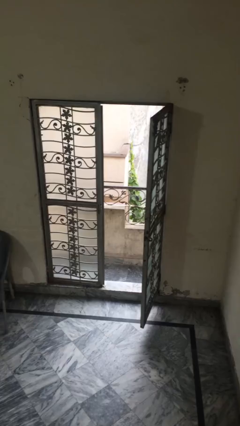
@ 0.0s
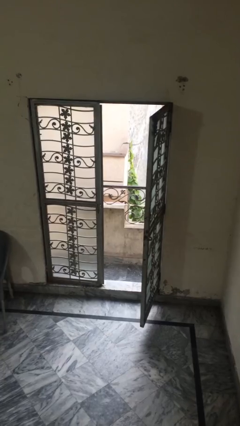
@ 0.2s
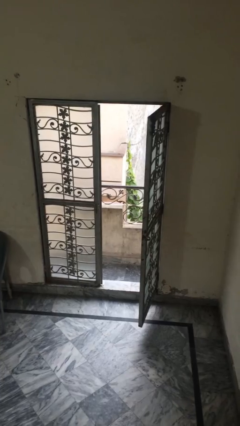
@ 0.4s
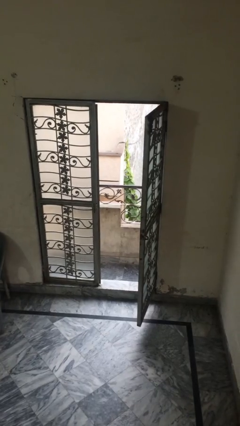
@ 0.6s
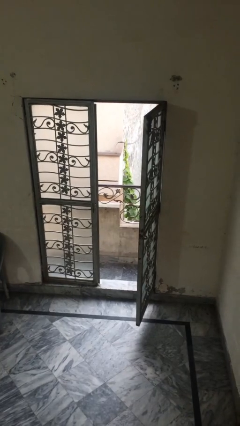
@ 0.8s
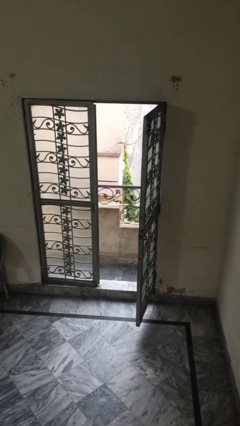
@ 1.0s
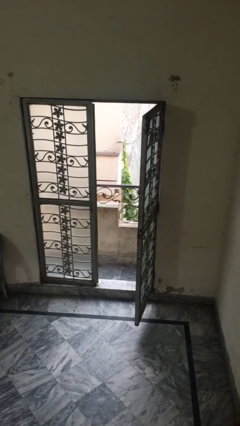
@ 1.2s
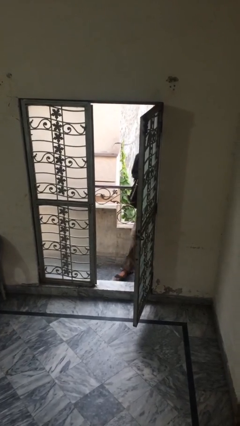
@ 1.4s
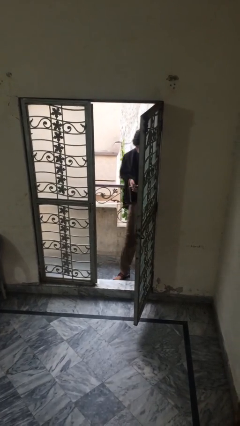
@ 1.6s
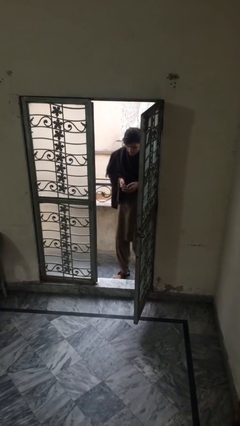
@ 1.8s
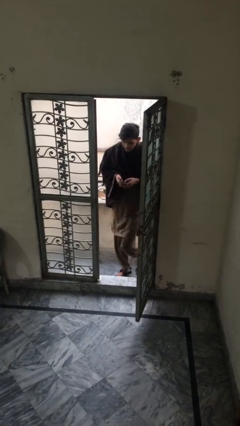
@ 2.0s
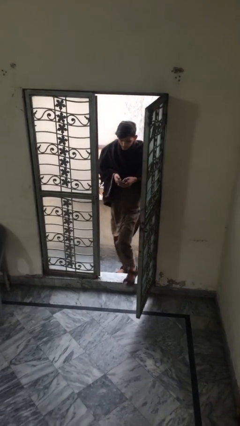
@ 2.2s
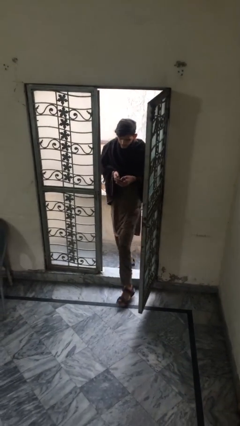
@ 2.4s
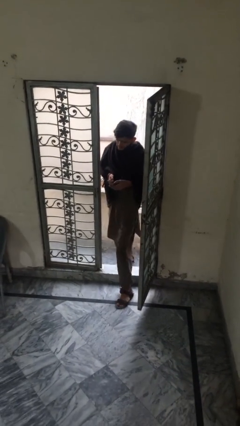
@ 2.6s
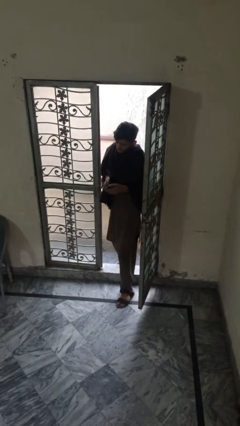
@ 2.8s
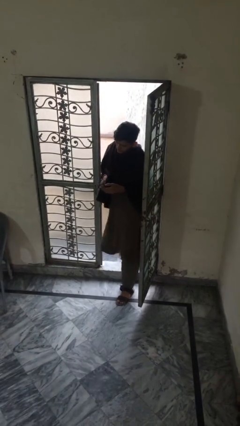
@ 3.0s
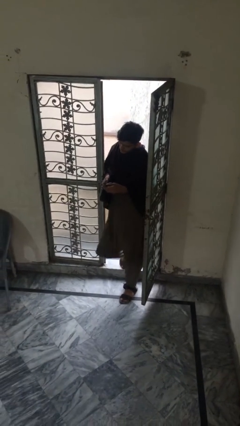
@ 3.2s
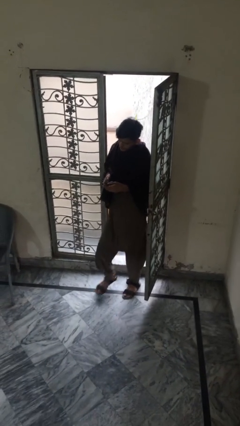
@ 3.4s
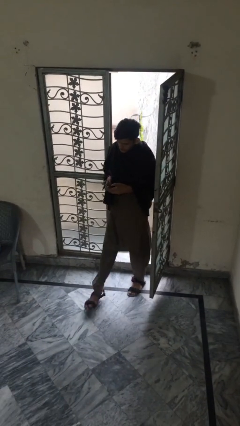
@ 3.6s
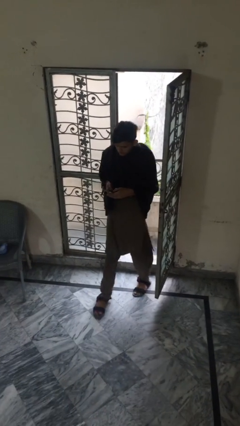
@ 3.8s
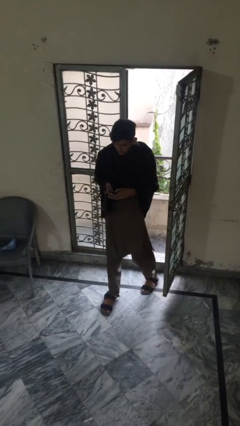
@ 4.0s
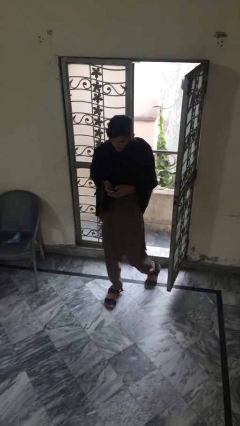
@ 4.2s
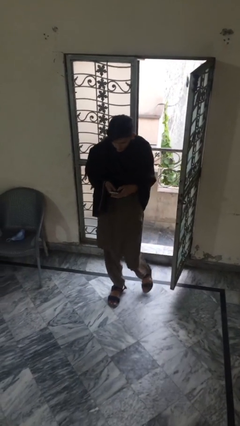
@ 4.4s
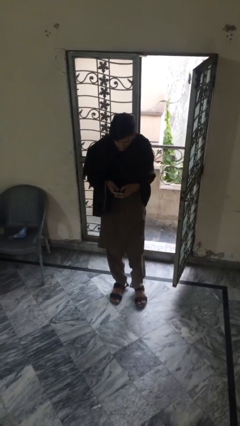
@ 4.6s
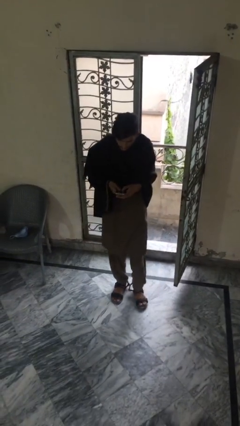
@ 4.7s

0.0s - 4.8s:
person enters scene through structure

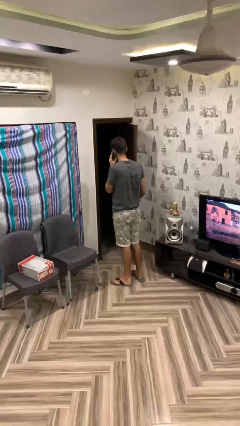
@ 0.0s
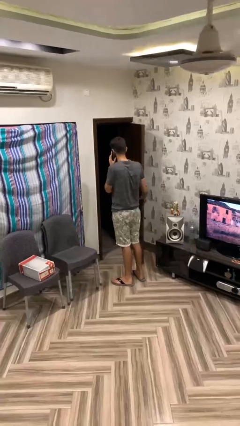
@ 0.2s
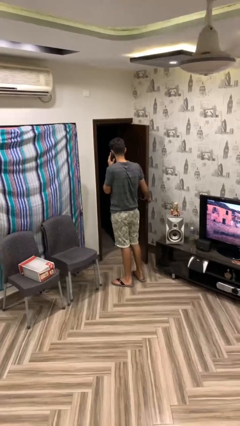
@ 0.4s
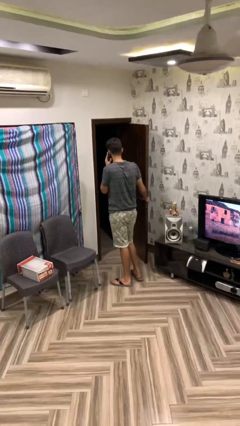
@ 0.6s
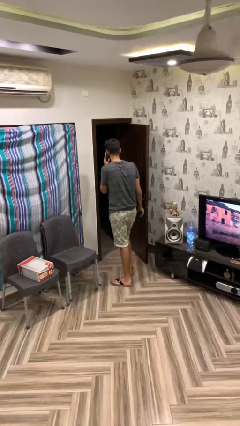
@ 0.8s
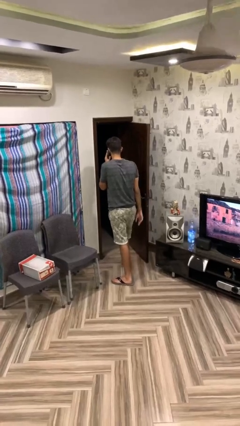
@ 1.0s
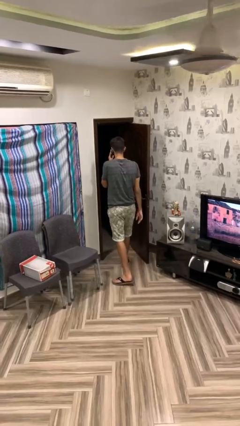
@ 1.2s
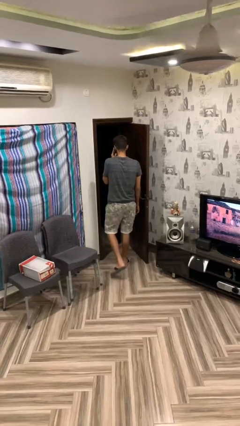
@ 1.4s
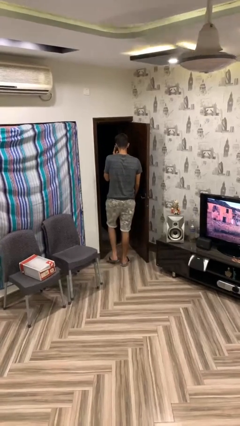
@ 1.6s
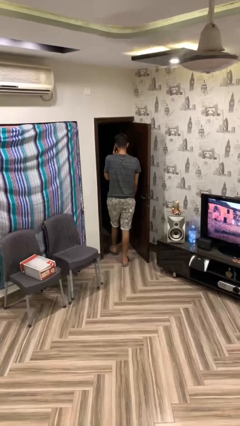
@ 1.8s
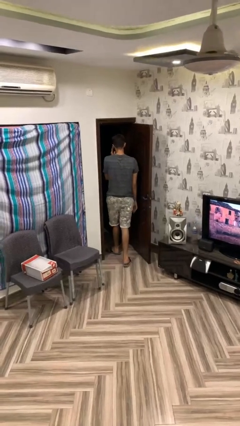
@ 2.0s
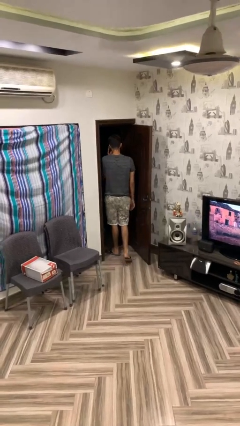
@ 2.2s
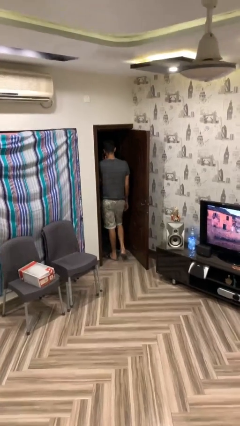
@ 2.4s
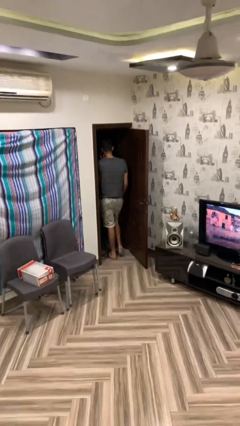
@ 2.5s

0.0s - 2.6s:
person exits scene through structure

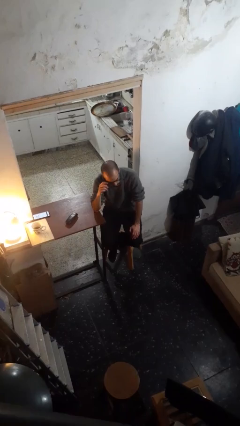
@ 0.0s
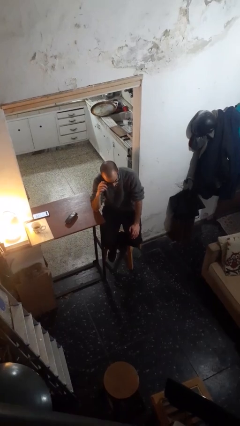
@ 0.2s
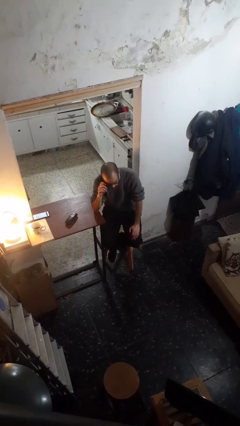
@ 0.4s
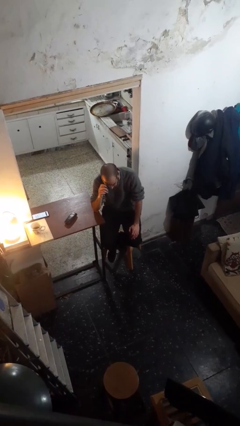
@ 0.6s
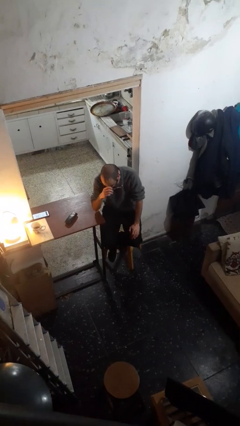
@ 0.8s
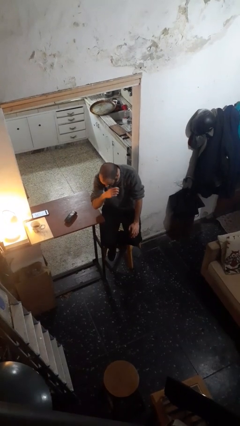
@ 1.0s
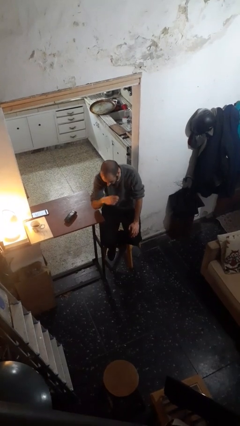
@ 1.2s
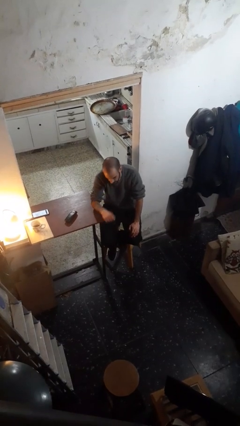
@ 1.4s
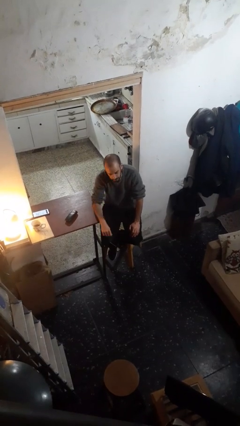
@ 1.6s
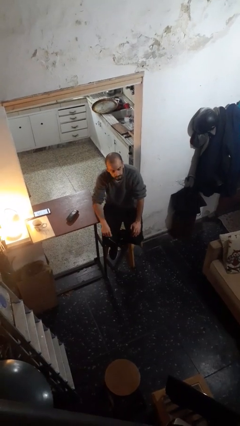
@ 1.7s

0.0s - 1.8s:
person takes off glasses

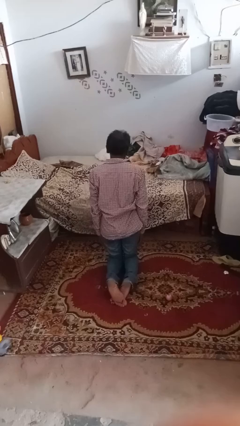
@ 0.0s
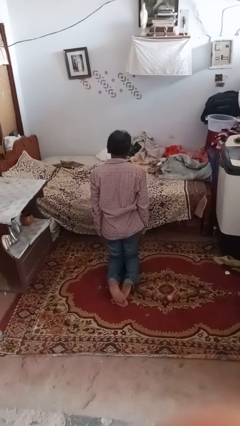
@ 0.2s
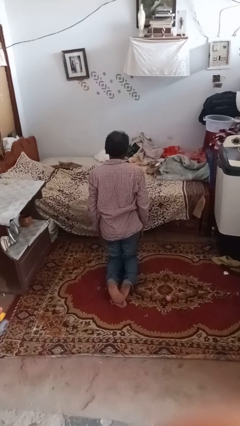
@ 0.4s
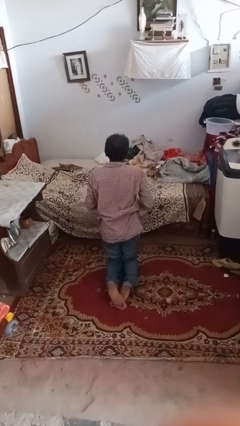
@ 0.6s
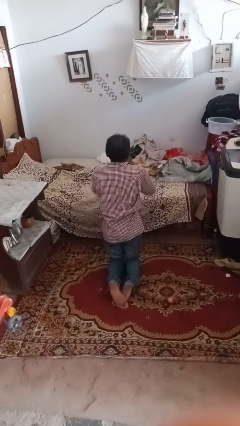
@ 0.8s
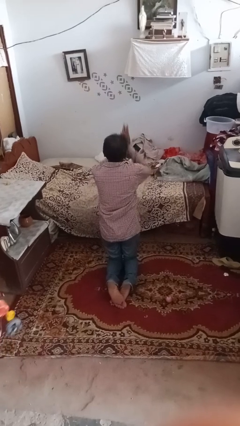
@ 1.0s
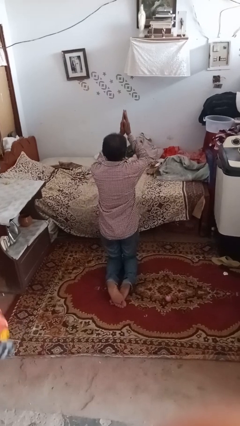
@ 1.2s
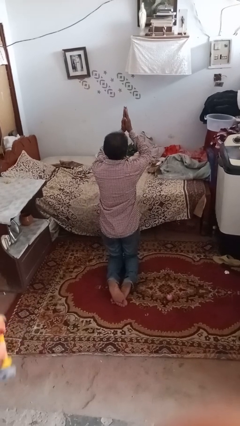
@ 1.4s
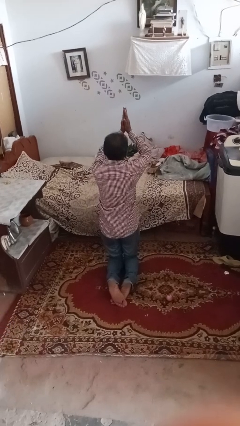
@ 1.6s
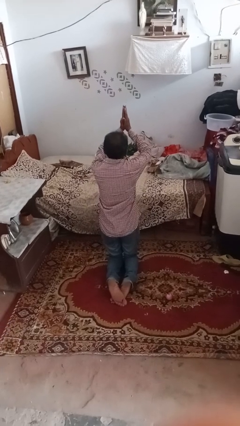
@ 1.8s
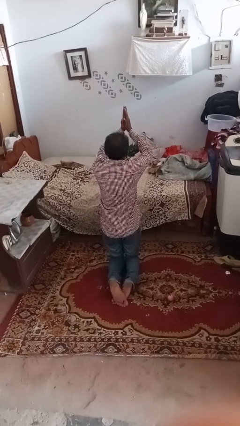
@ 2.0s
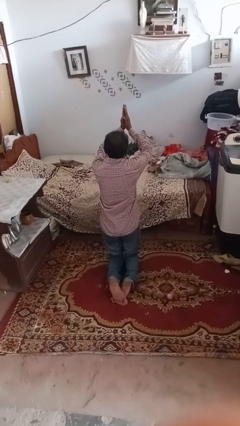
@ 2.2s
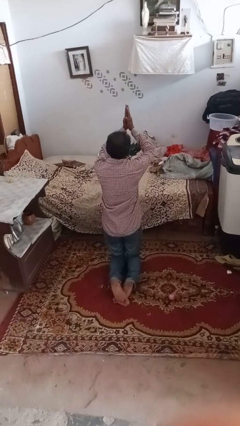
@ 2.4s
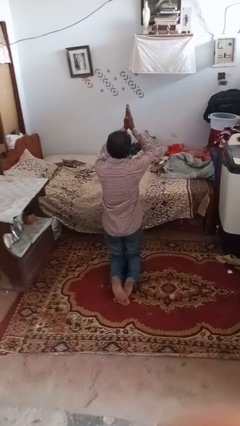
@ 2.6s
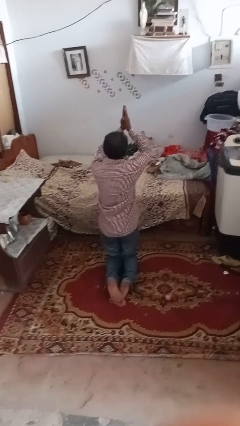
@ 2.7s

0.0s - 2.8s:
person prays

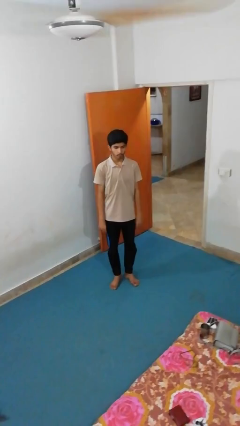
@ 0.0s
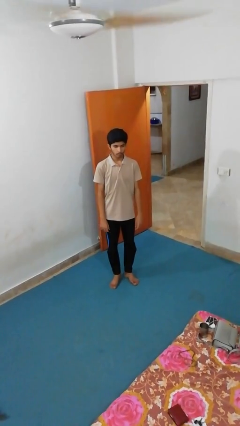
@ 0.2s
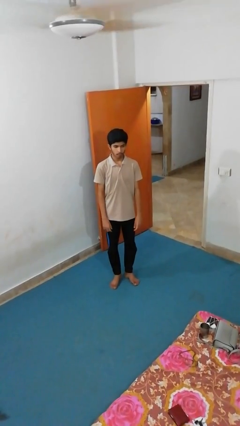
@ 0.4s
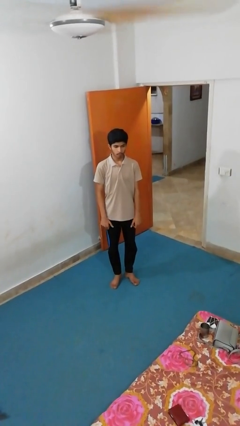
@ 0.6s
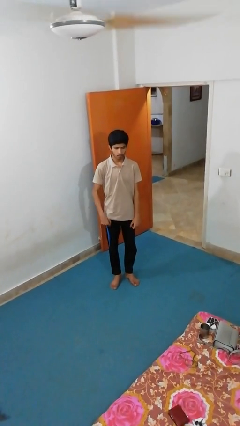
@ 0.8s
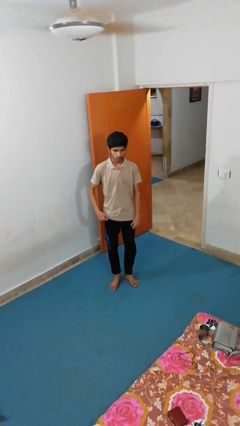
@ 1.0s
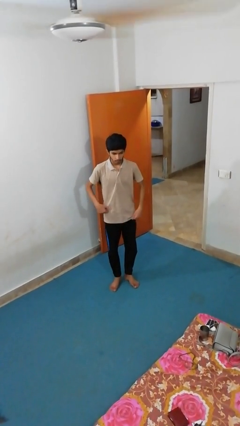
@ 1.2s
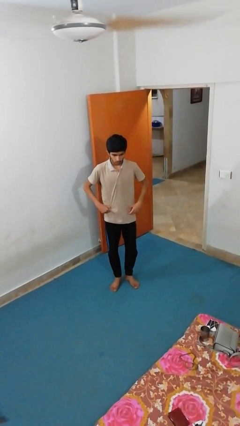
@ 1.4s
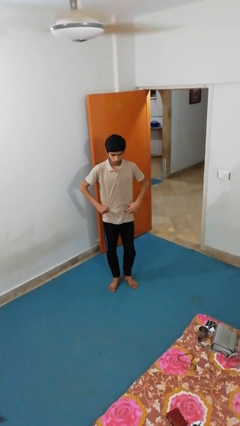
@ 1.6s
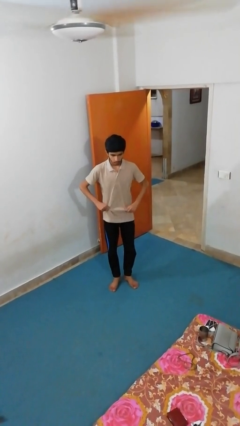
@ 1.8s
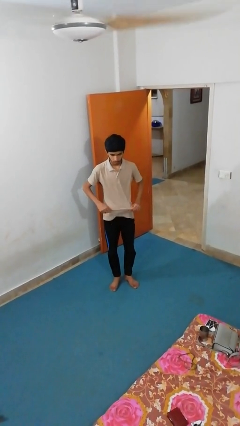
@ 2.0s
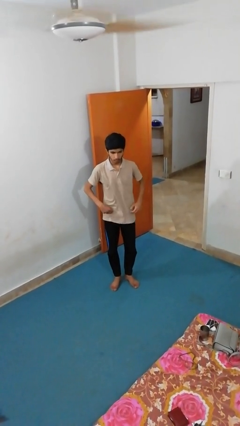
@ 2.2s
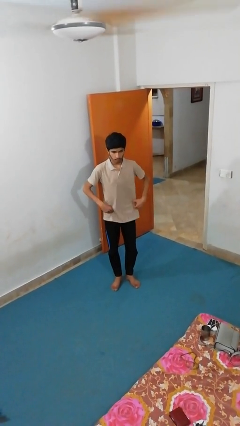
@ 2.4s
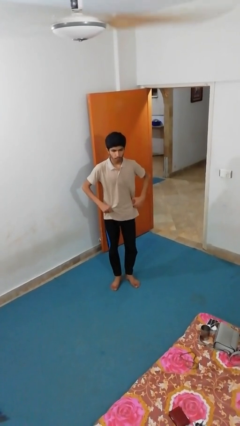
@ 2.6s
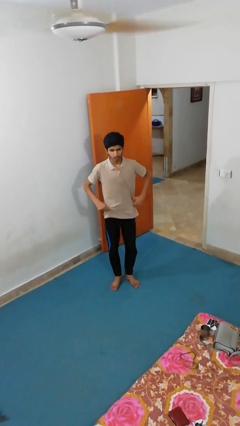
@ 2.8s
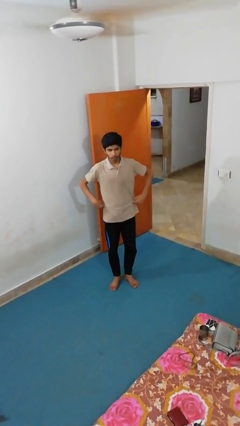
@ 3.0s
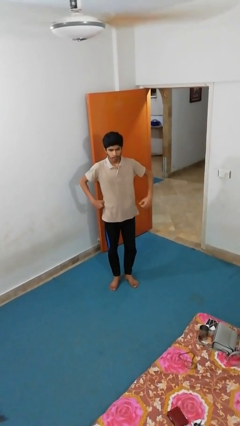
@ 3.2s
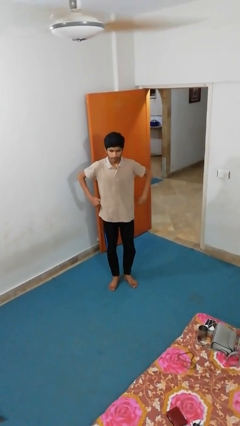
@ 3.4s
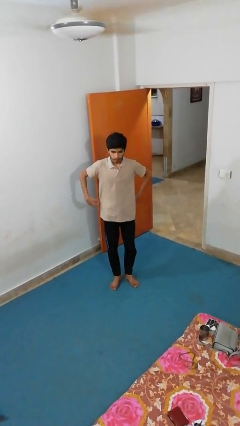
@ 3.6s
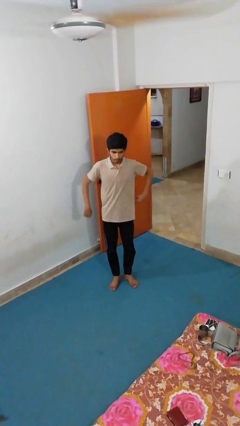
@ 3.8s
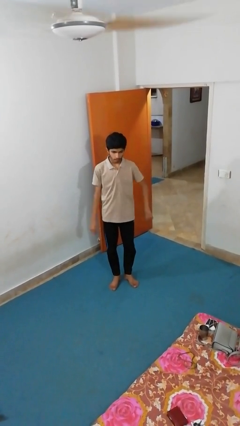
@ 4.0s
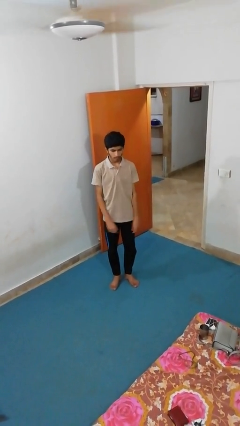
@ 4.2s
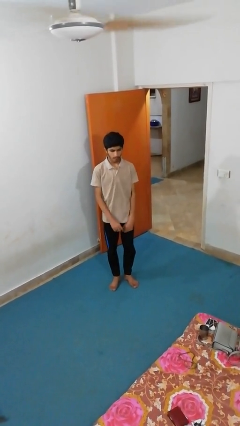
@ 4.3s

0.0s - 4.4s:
person hikes up pants

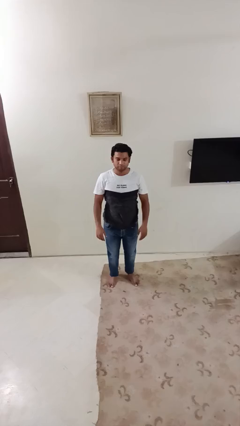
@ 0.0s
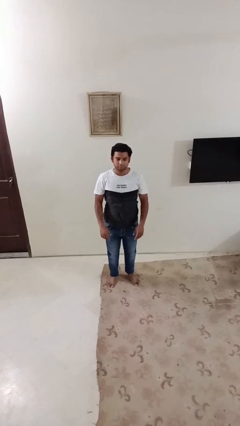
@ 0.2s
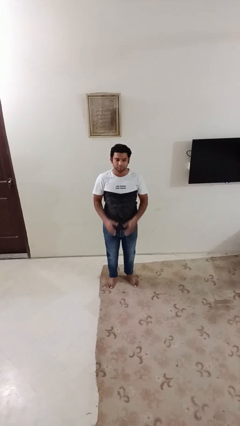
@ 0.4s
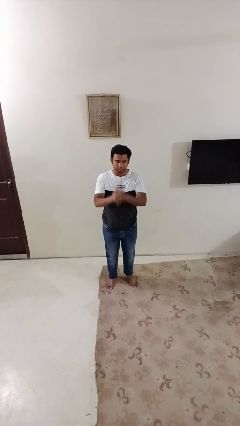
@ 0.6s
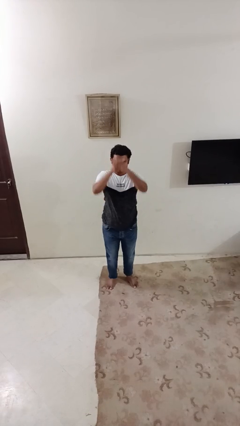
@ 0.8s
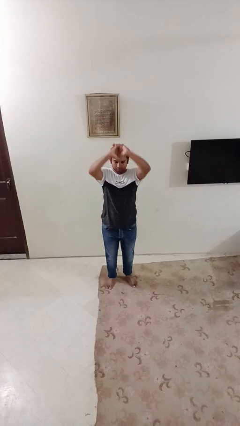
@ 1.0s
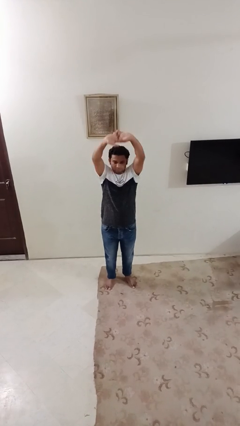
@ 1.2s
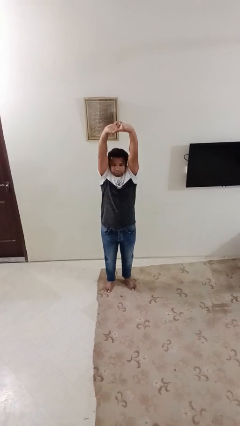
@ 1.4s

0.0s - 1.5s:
person stretches arms over head
